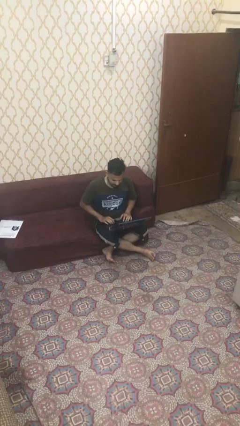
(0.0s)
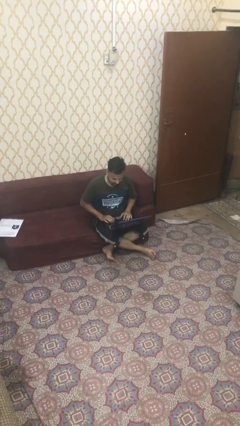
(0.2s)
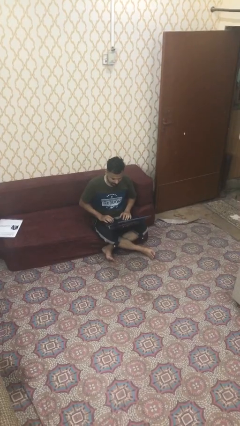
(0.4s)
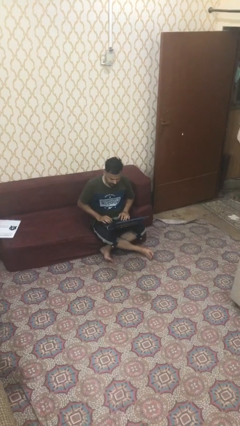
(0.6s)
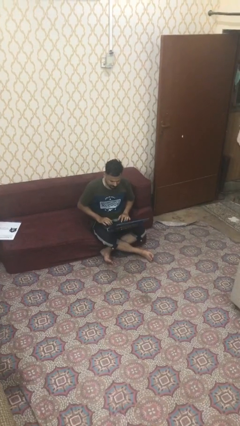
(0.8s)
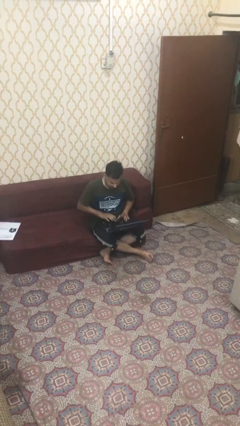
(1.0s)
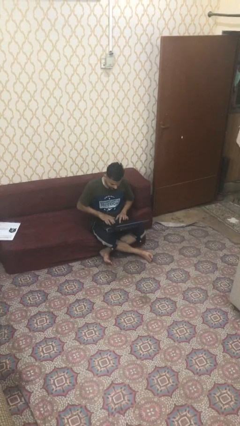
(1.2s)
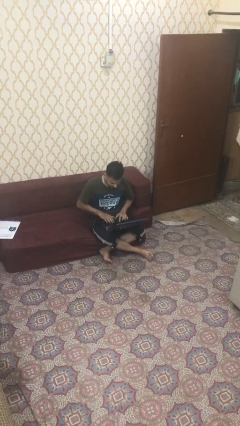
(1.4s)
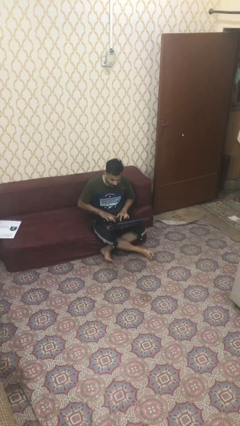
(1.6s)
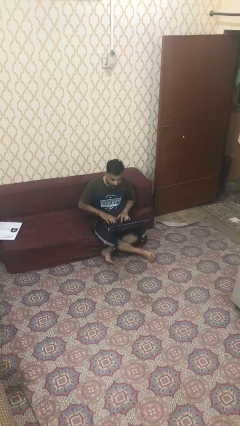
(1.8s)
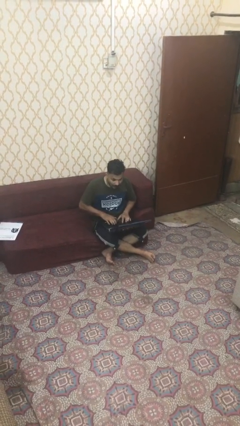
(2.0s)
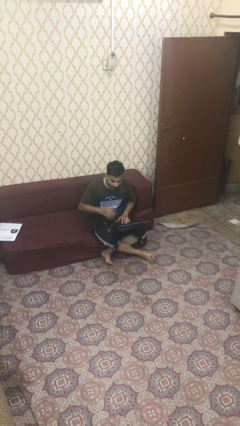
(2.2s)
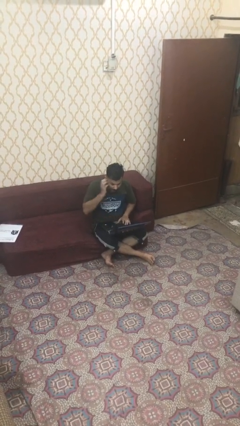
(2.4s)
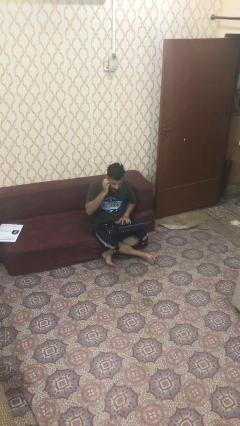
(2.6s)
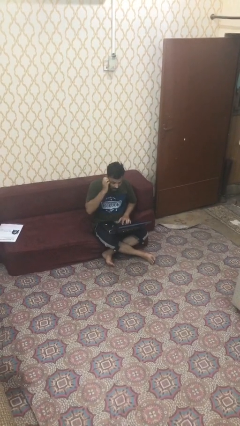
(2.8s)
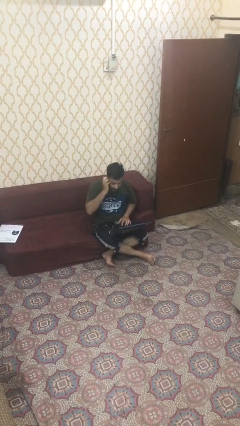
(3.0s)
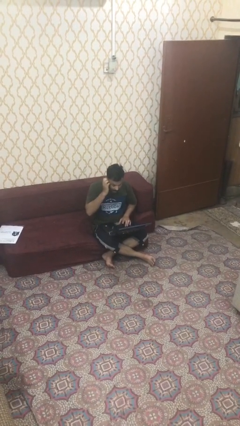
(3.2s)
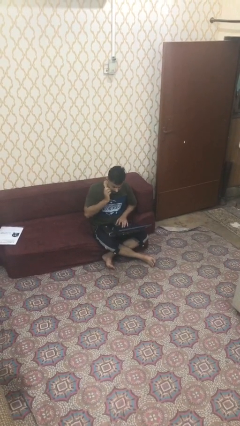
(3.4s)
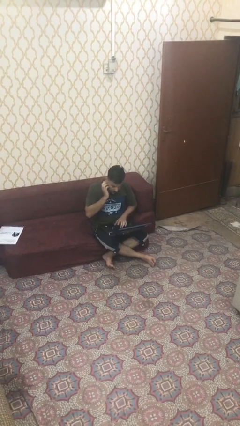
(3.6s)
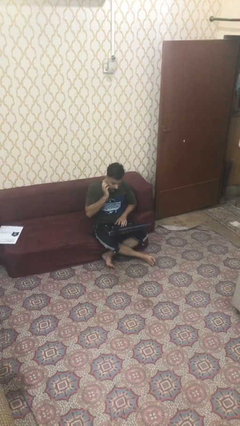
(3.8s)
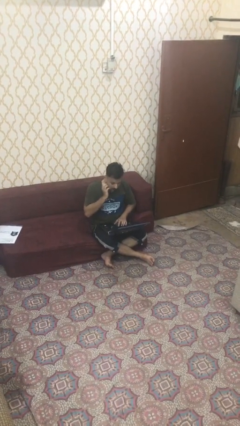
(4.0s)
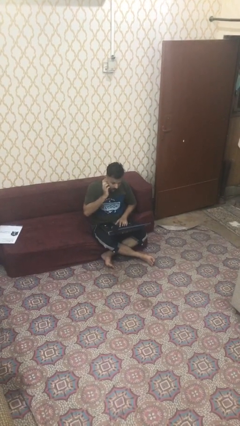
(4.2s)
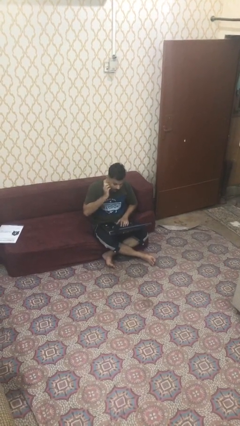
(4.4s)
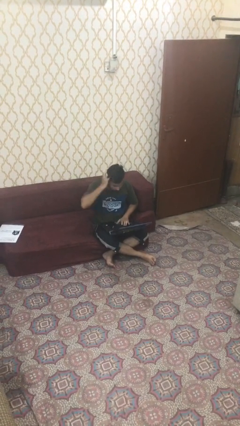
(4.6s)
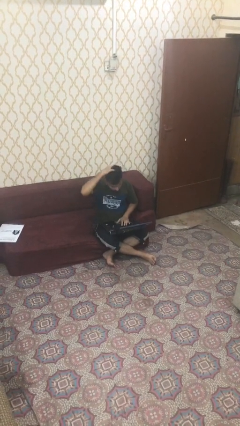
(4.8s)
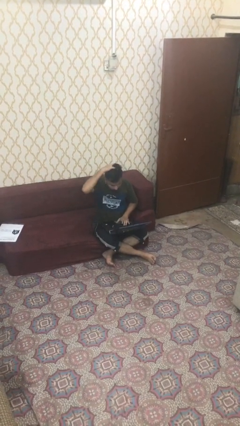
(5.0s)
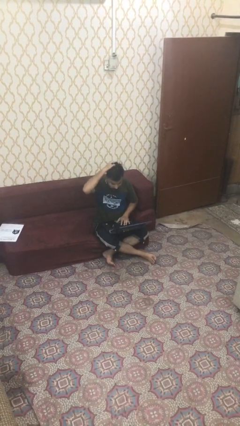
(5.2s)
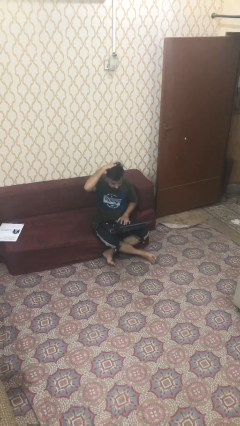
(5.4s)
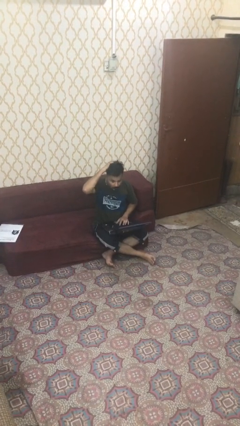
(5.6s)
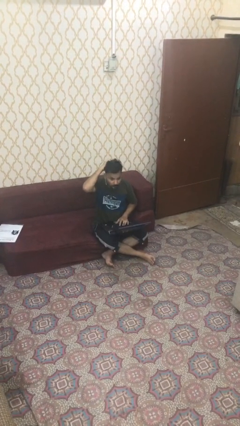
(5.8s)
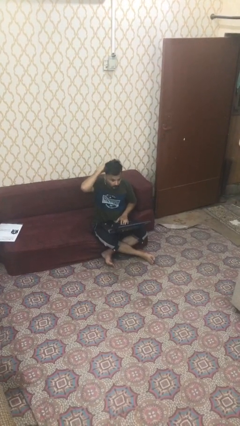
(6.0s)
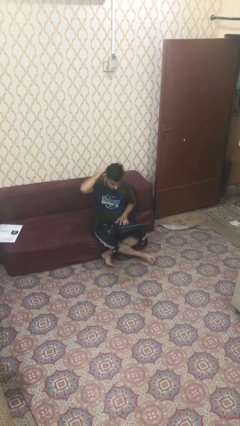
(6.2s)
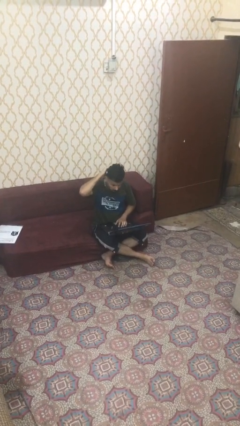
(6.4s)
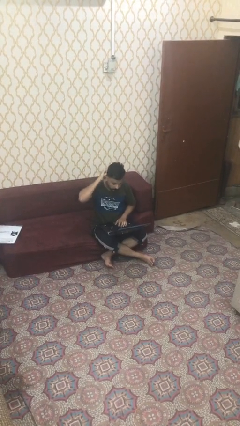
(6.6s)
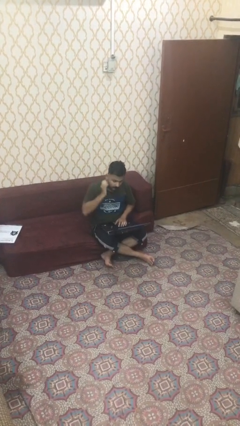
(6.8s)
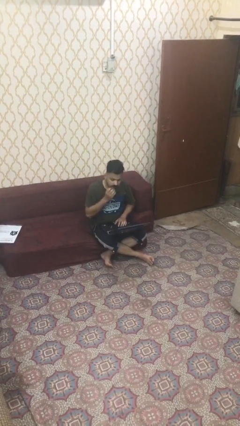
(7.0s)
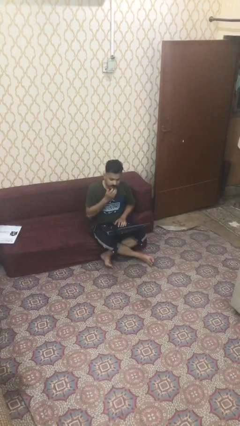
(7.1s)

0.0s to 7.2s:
person interacts with laptop

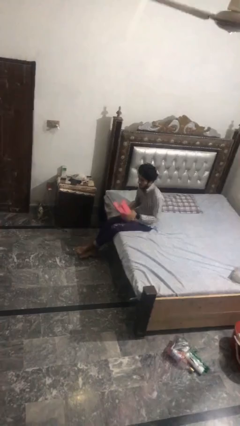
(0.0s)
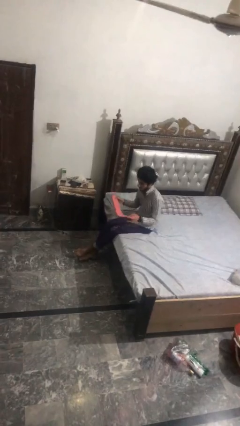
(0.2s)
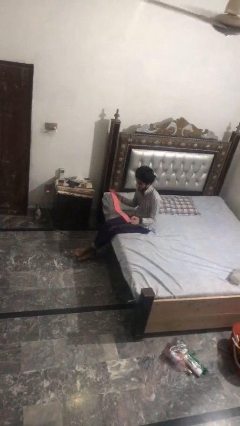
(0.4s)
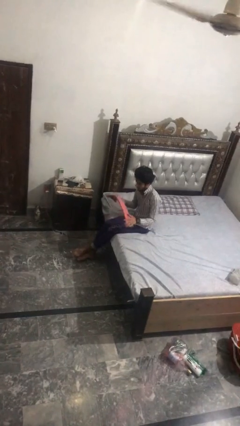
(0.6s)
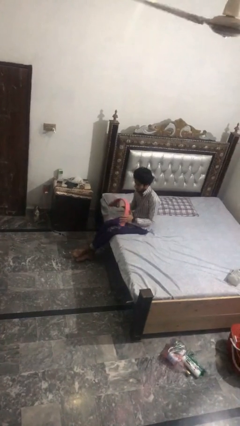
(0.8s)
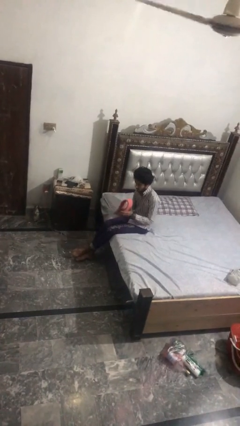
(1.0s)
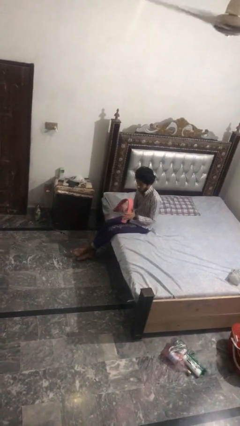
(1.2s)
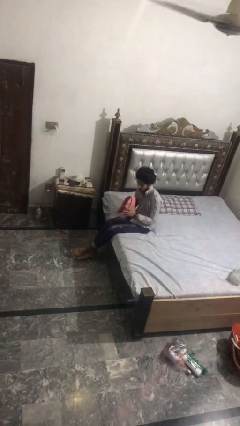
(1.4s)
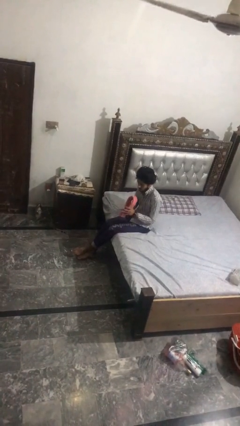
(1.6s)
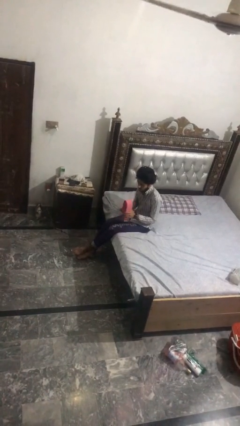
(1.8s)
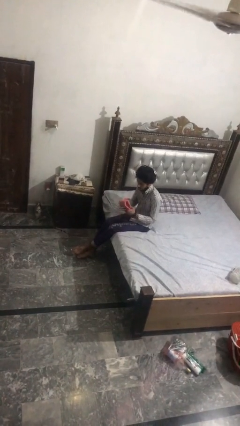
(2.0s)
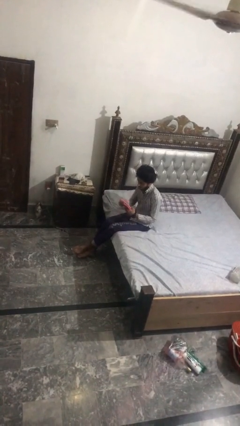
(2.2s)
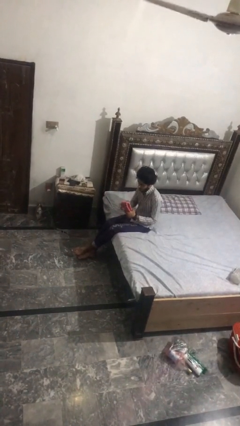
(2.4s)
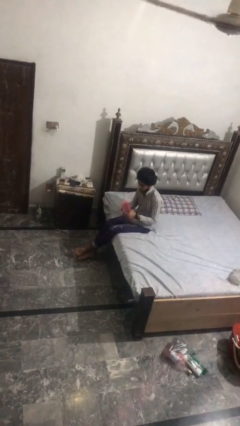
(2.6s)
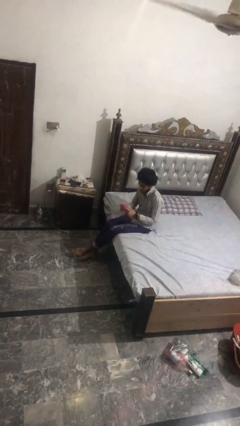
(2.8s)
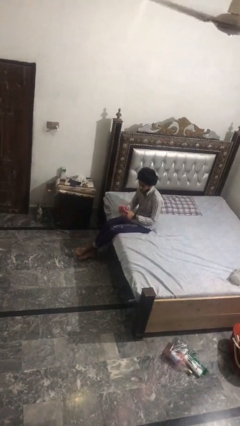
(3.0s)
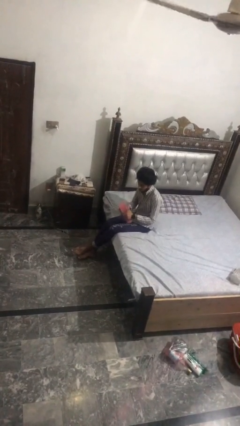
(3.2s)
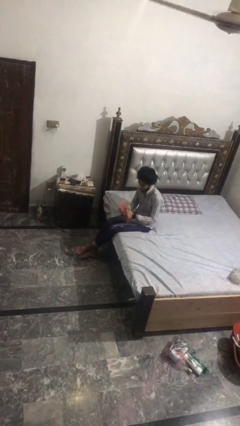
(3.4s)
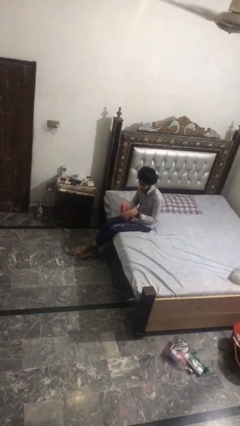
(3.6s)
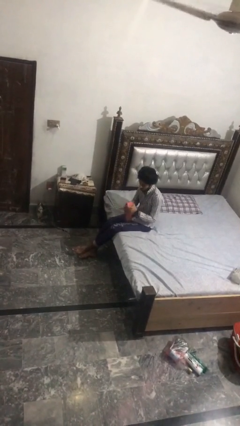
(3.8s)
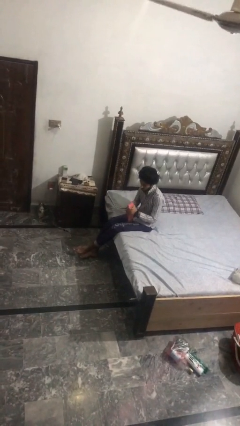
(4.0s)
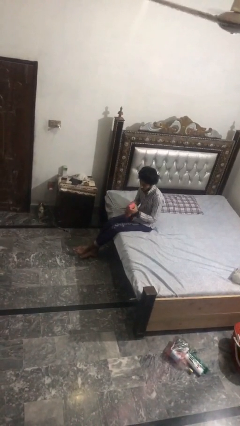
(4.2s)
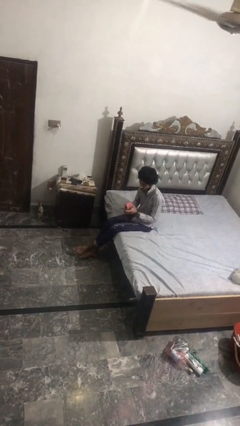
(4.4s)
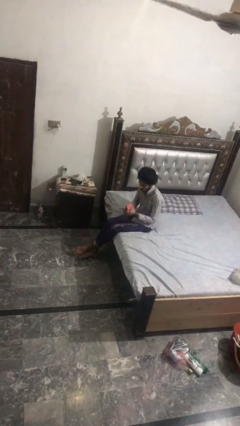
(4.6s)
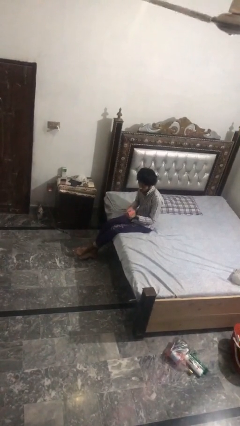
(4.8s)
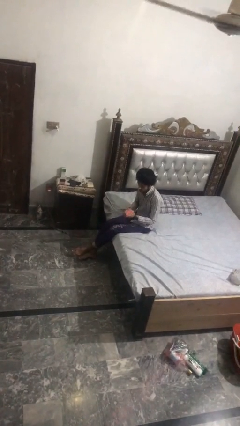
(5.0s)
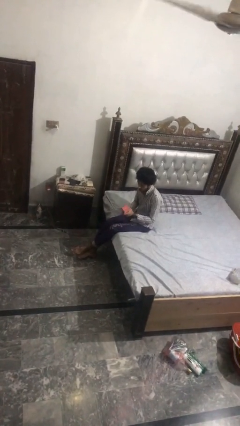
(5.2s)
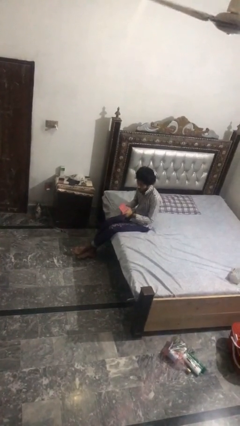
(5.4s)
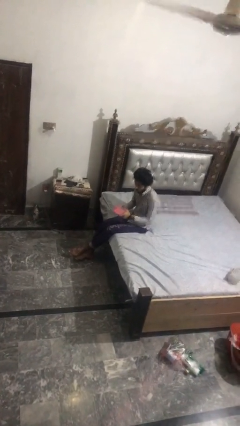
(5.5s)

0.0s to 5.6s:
person squeezes object

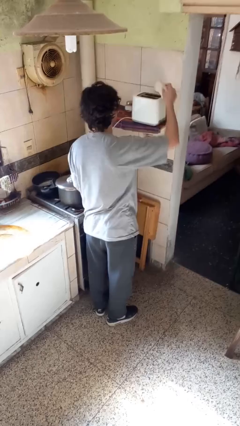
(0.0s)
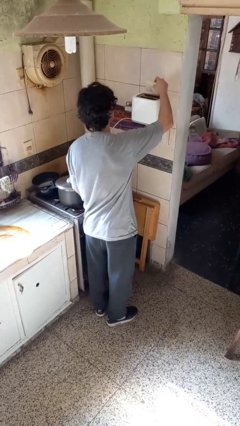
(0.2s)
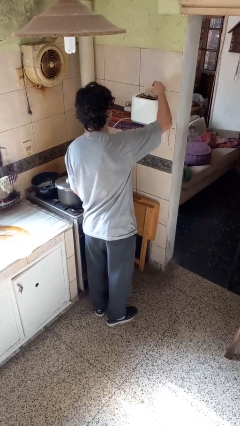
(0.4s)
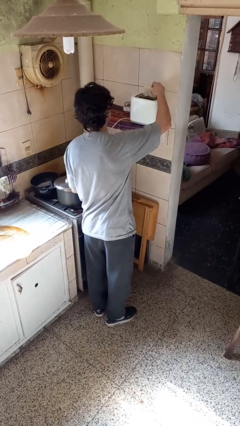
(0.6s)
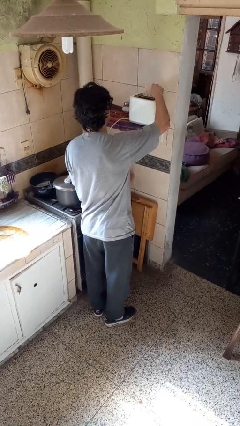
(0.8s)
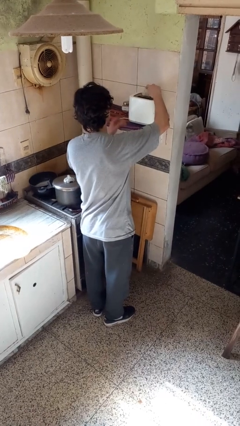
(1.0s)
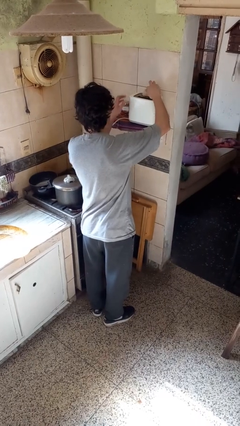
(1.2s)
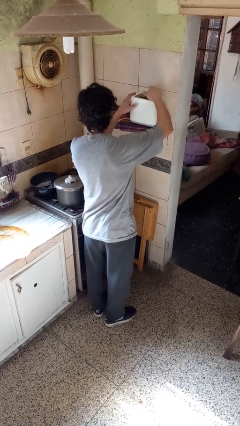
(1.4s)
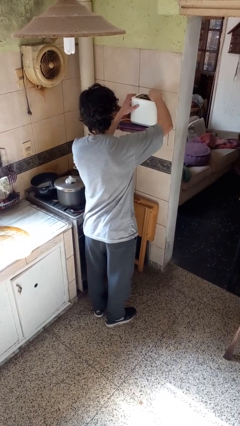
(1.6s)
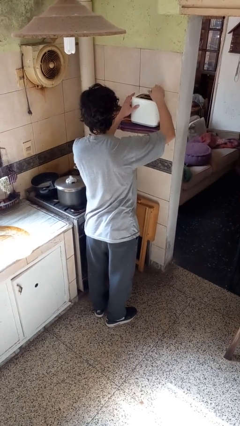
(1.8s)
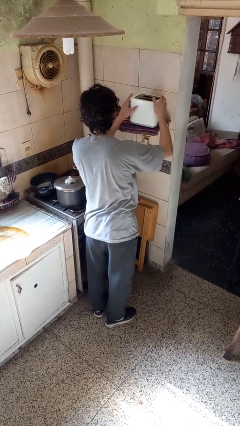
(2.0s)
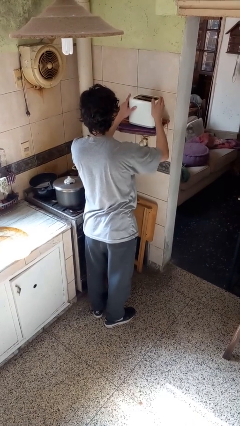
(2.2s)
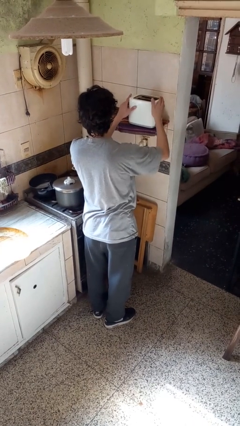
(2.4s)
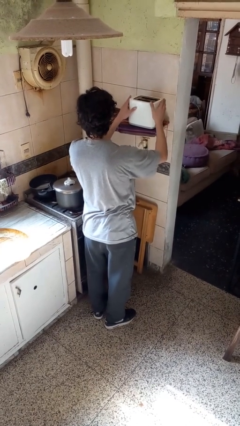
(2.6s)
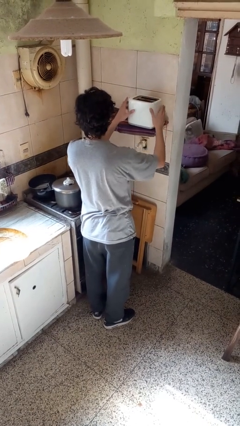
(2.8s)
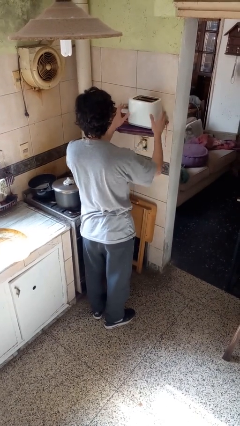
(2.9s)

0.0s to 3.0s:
person puts object into toaster

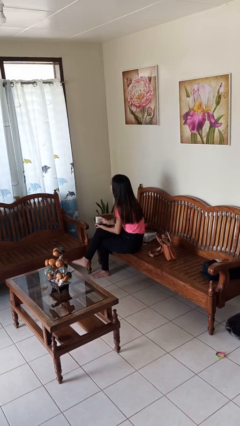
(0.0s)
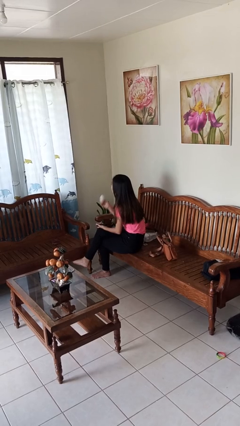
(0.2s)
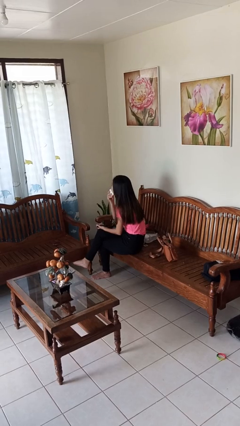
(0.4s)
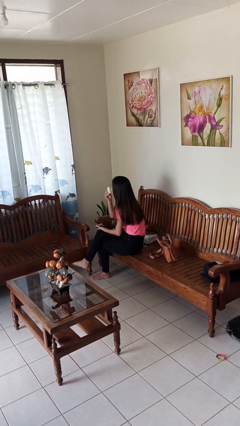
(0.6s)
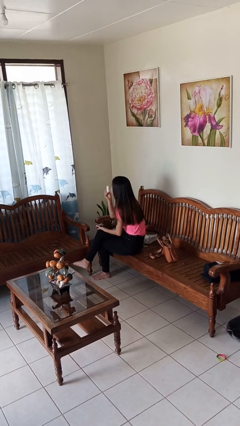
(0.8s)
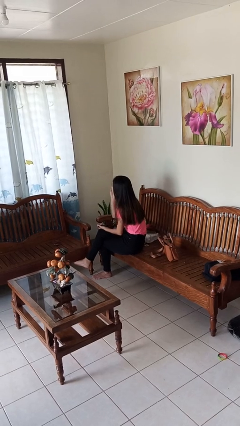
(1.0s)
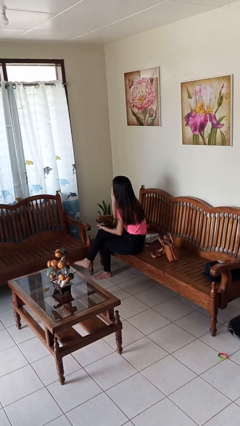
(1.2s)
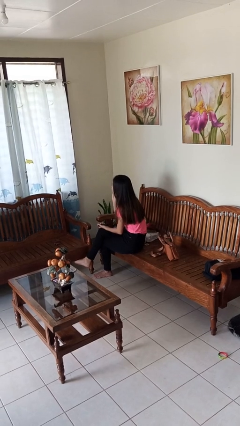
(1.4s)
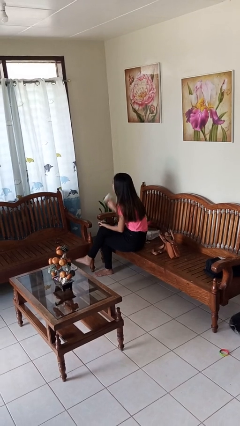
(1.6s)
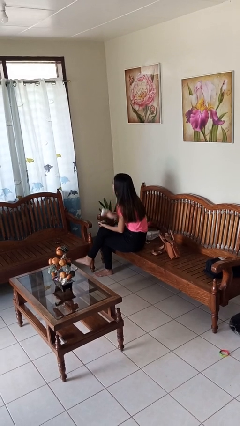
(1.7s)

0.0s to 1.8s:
person applies foundation makeup

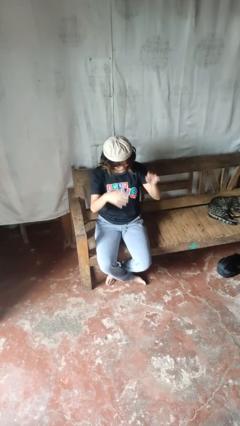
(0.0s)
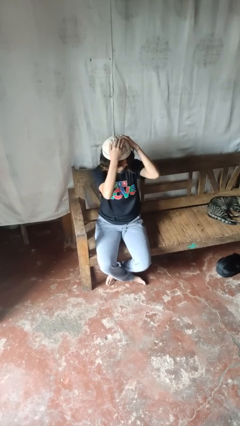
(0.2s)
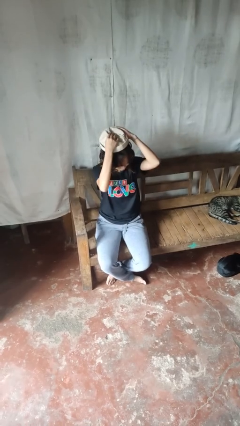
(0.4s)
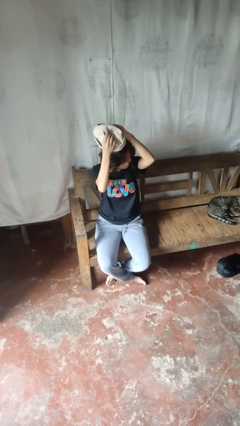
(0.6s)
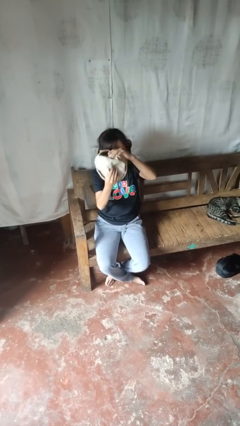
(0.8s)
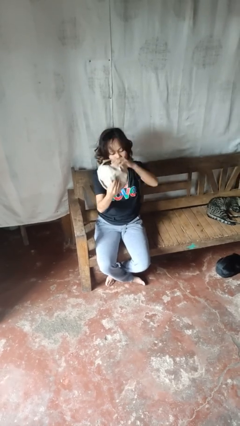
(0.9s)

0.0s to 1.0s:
person takes off hat
